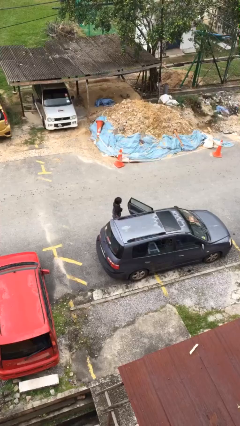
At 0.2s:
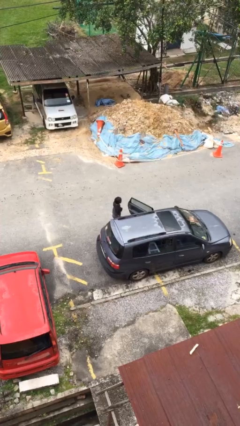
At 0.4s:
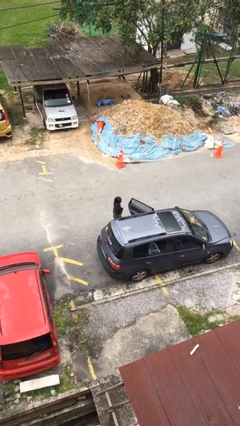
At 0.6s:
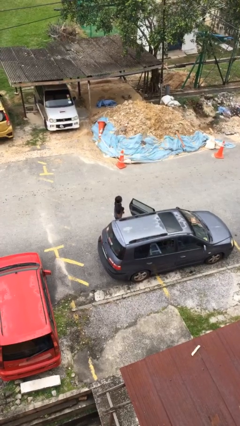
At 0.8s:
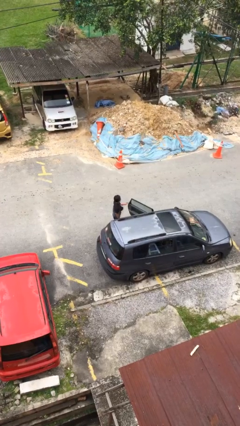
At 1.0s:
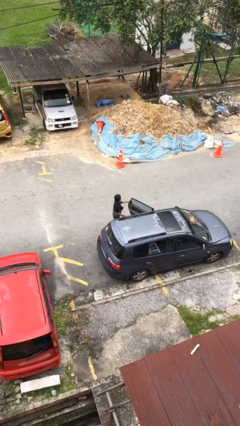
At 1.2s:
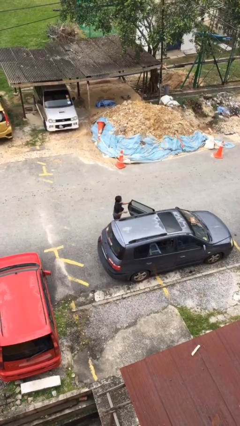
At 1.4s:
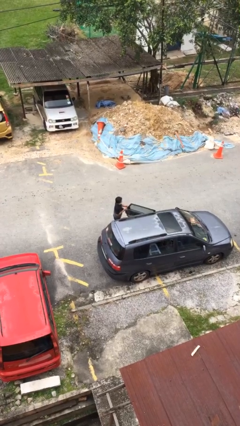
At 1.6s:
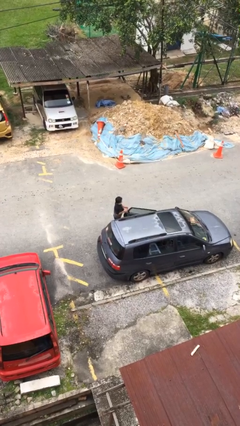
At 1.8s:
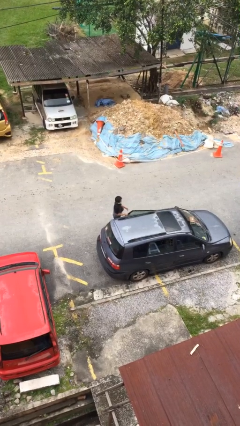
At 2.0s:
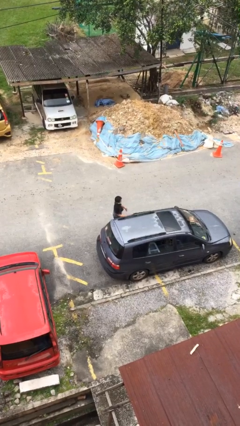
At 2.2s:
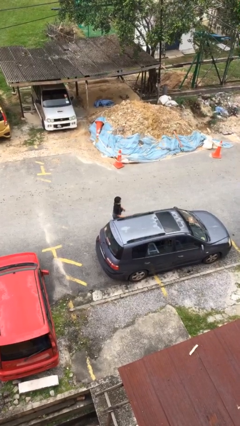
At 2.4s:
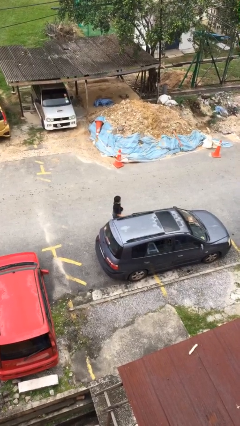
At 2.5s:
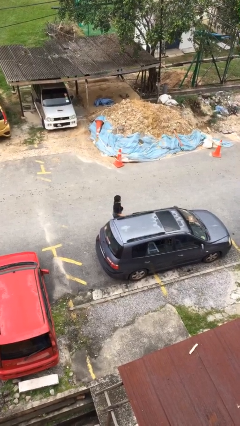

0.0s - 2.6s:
person closes car door

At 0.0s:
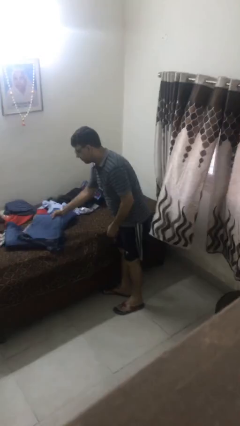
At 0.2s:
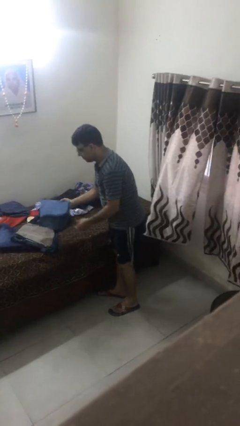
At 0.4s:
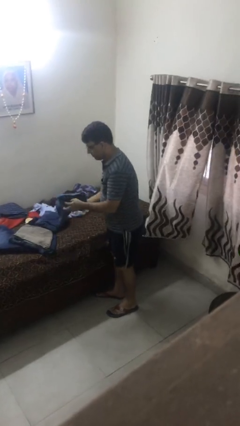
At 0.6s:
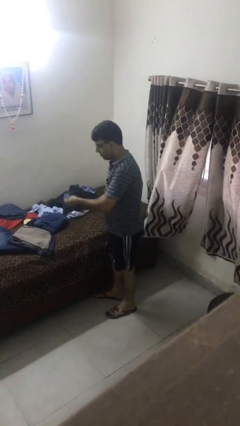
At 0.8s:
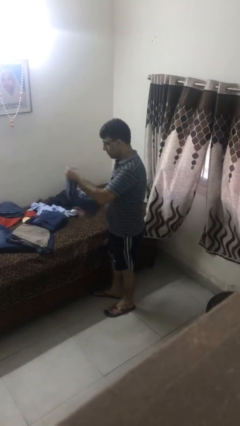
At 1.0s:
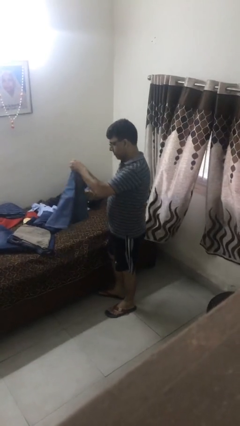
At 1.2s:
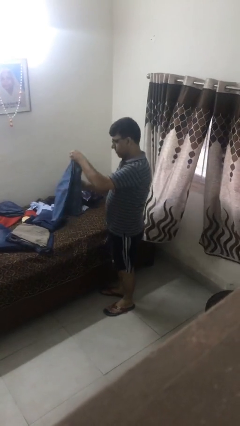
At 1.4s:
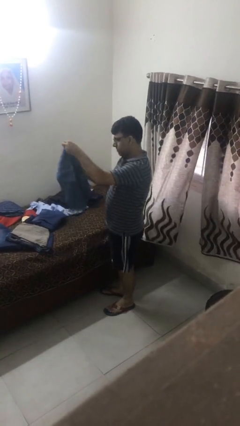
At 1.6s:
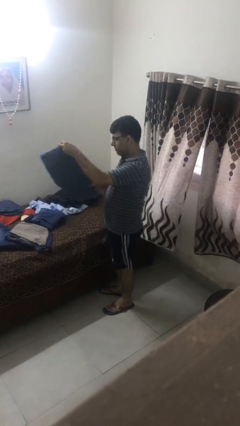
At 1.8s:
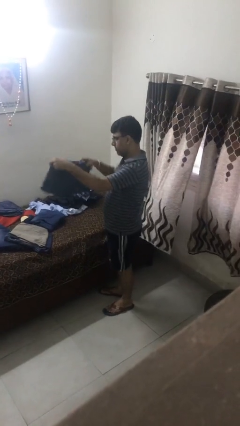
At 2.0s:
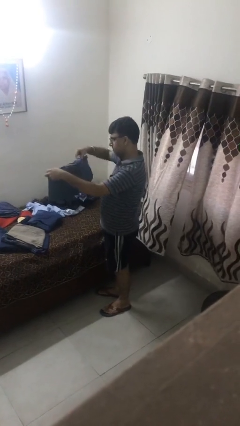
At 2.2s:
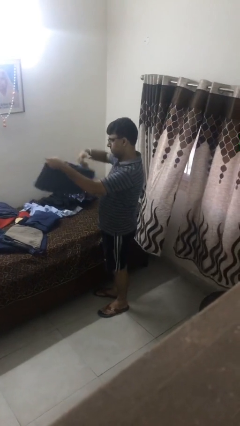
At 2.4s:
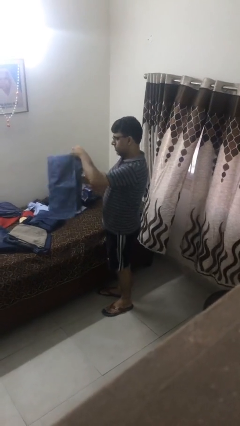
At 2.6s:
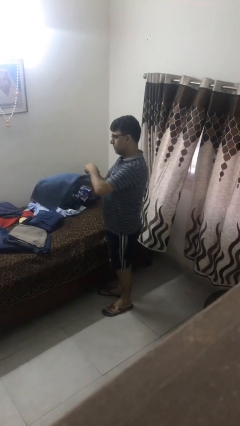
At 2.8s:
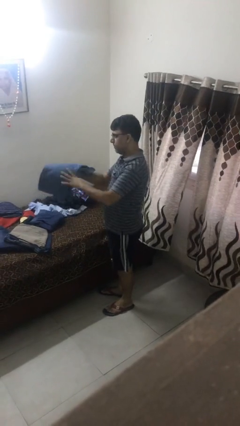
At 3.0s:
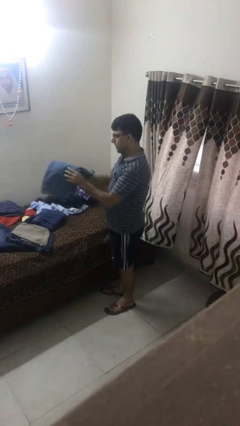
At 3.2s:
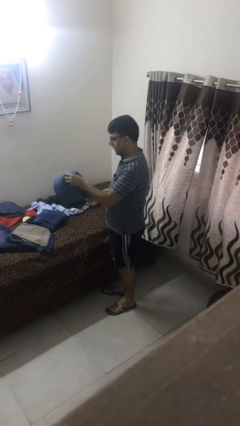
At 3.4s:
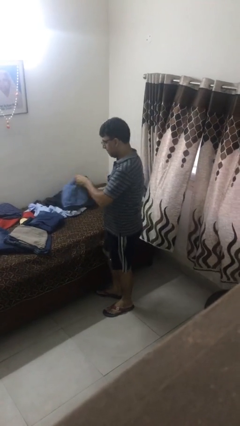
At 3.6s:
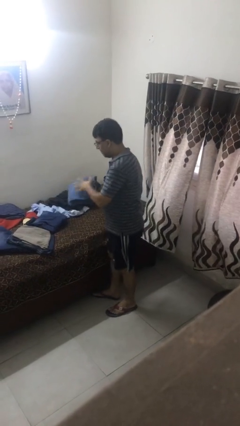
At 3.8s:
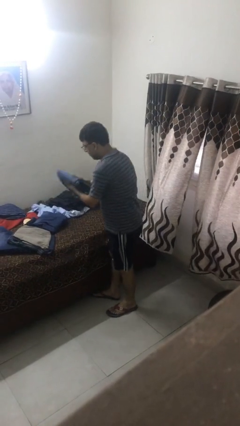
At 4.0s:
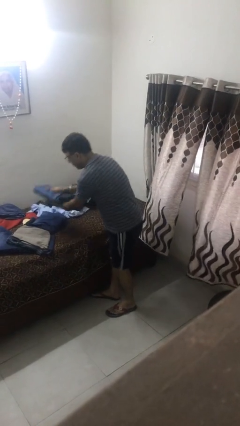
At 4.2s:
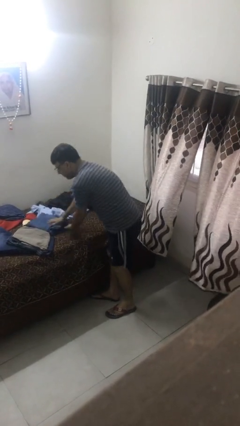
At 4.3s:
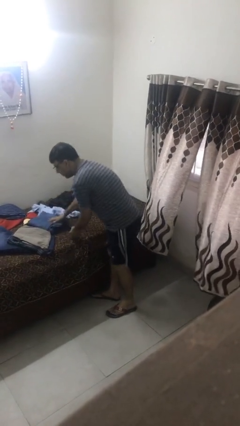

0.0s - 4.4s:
person folds pants

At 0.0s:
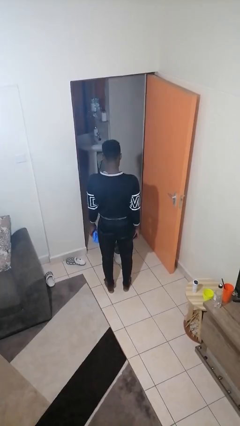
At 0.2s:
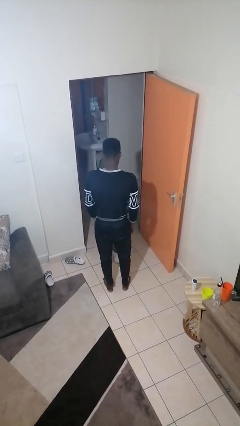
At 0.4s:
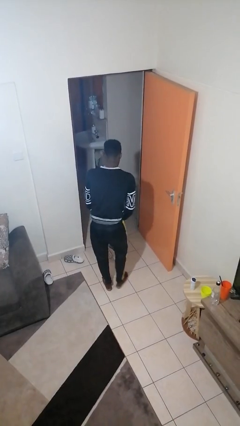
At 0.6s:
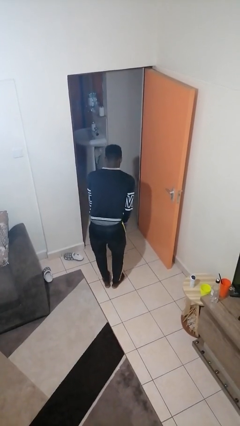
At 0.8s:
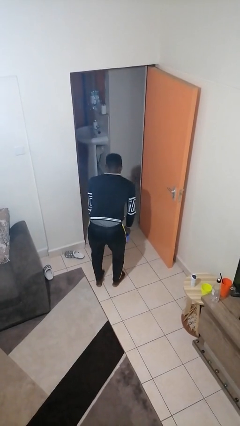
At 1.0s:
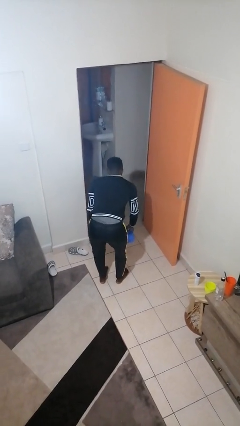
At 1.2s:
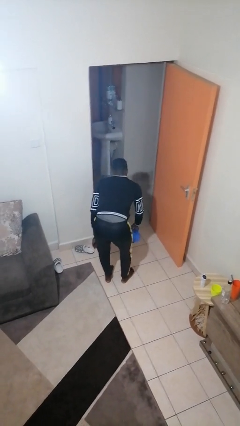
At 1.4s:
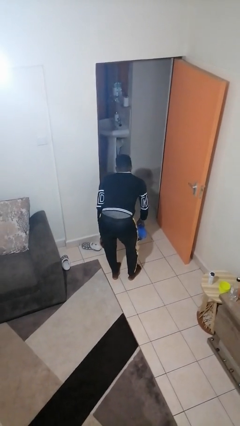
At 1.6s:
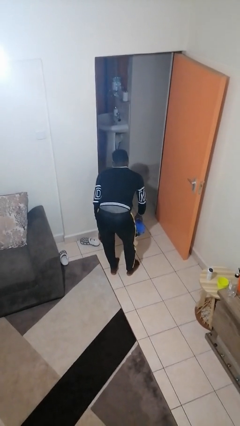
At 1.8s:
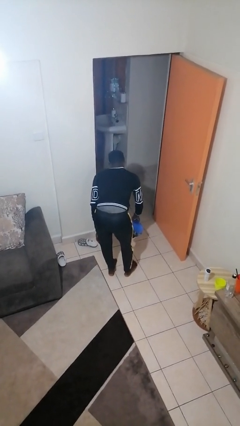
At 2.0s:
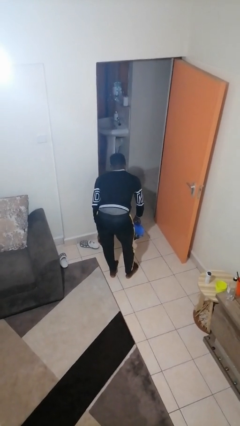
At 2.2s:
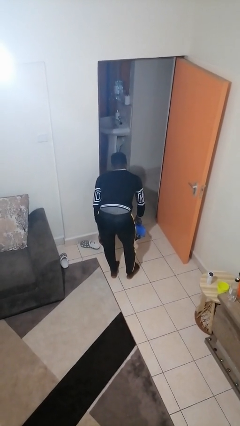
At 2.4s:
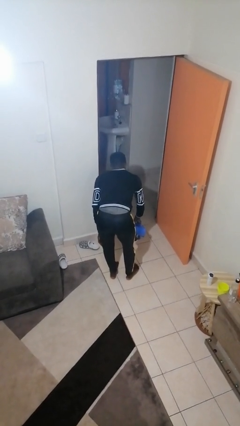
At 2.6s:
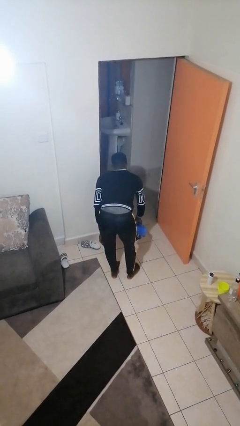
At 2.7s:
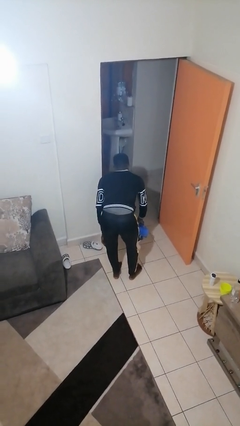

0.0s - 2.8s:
person waters houseplant

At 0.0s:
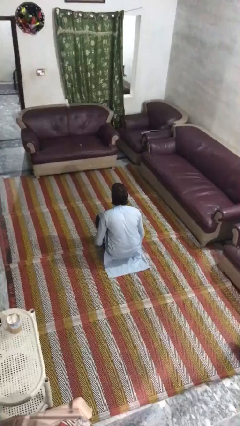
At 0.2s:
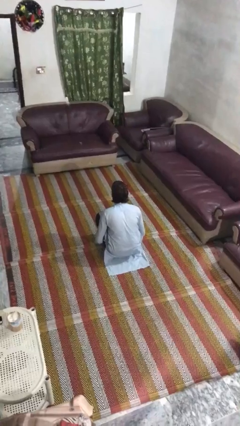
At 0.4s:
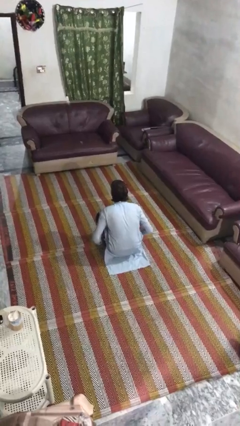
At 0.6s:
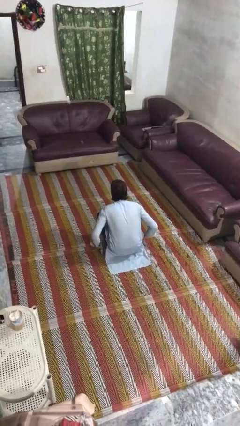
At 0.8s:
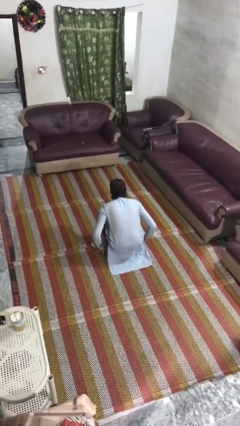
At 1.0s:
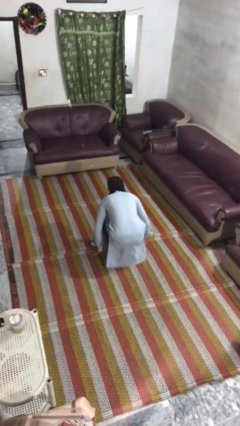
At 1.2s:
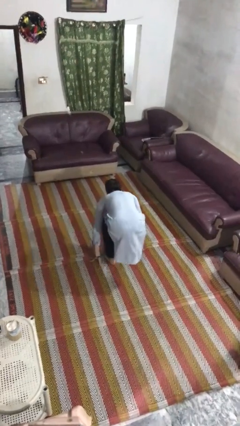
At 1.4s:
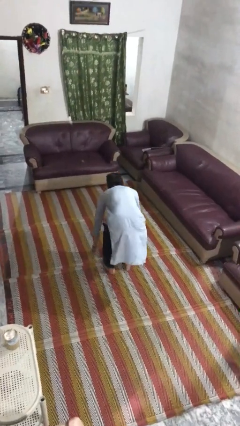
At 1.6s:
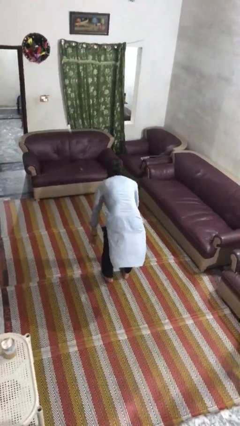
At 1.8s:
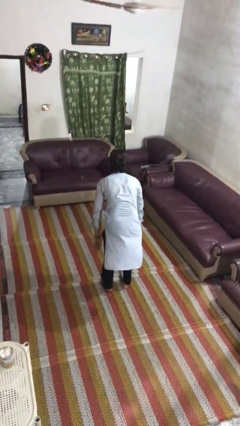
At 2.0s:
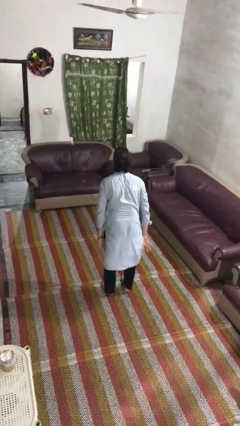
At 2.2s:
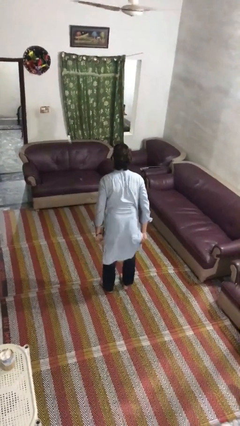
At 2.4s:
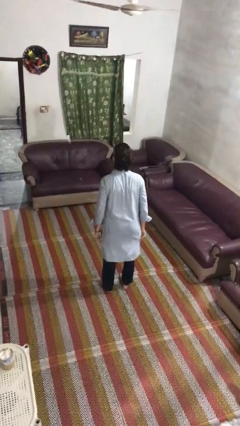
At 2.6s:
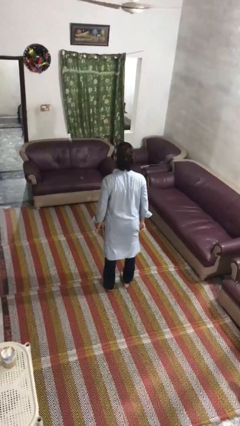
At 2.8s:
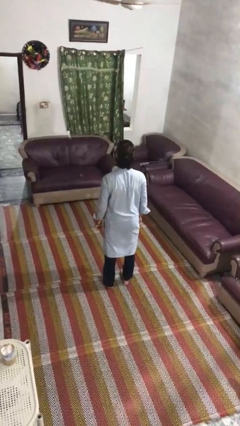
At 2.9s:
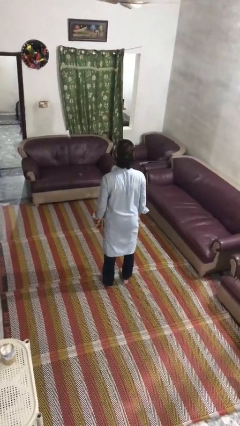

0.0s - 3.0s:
person stands up

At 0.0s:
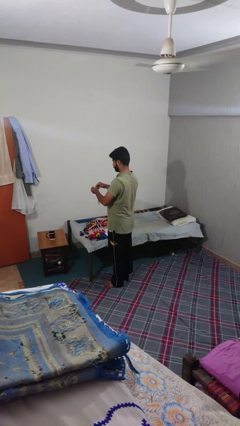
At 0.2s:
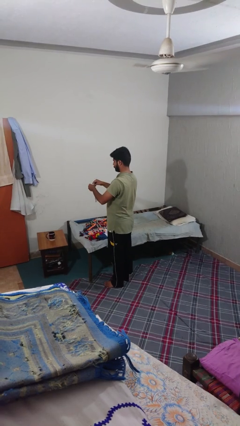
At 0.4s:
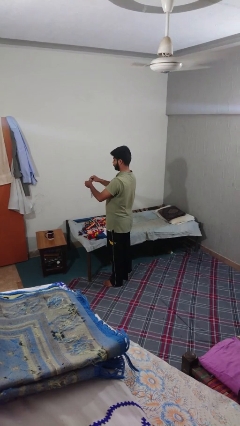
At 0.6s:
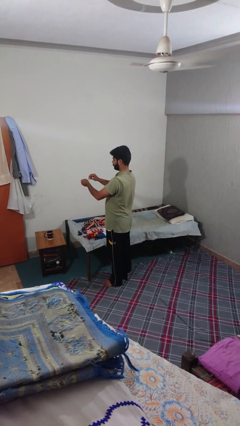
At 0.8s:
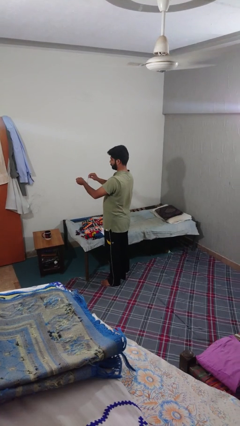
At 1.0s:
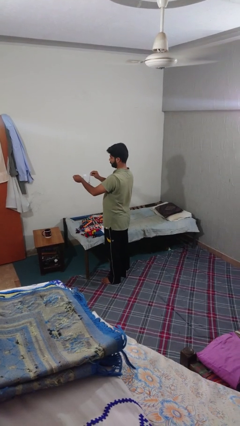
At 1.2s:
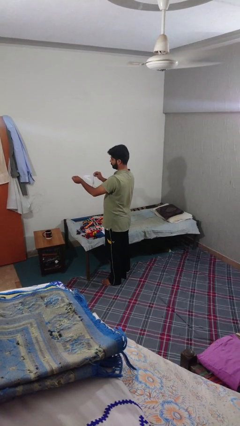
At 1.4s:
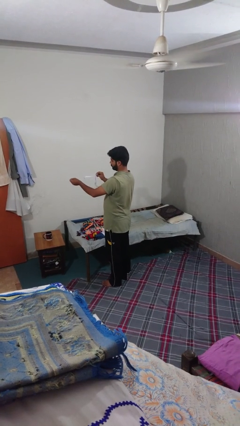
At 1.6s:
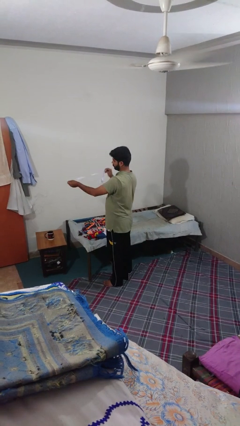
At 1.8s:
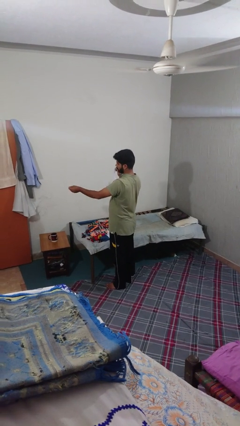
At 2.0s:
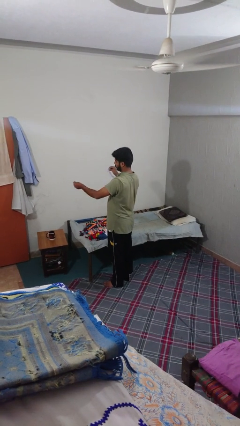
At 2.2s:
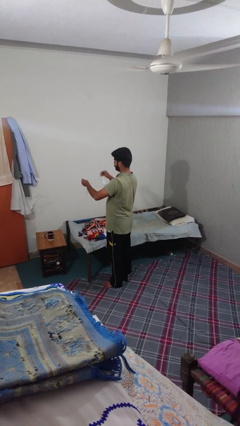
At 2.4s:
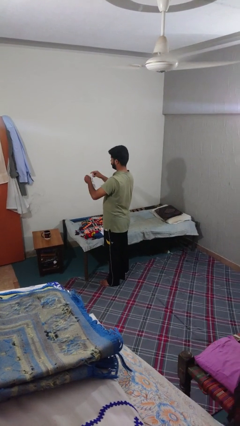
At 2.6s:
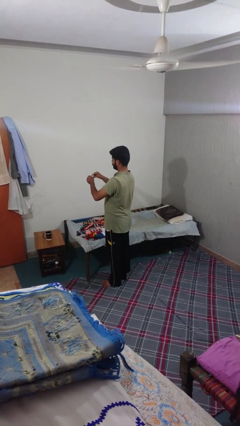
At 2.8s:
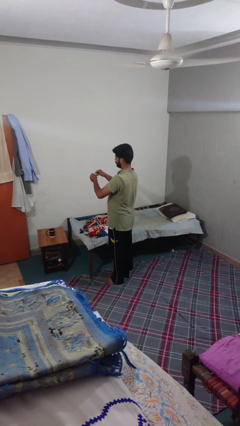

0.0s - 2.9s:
person tears paper

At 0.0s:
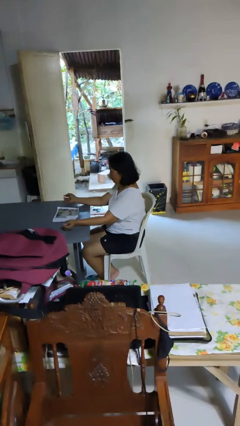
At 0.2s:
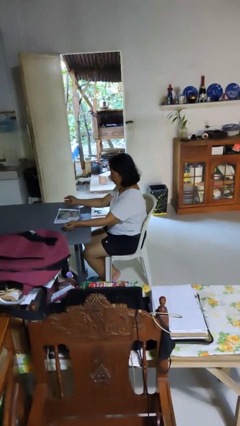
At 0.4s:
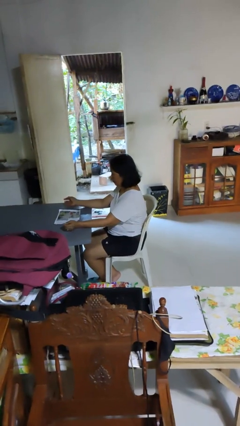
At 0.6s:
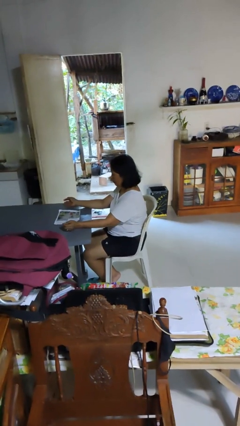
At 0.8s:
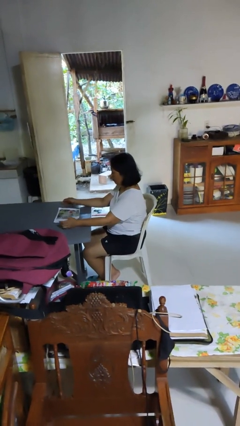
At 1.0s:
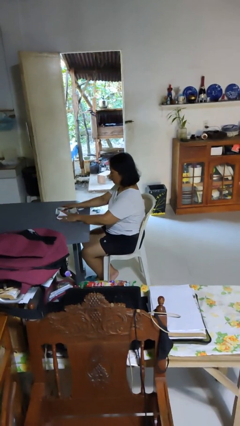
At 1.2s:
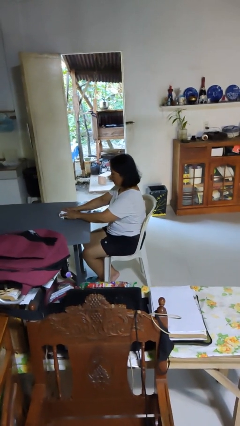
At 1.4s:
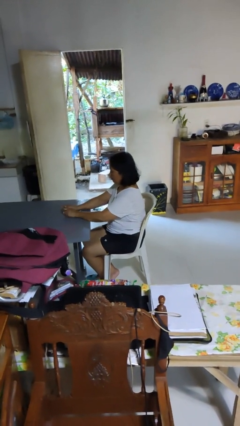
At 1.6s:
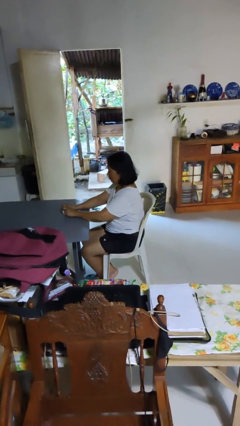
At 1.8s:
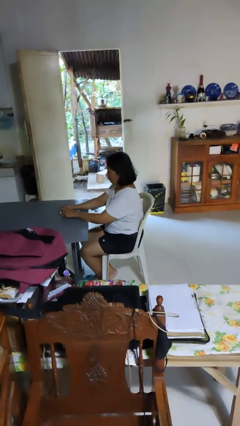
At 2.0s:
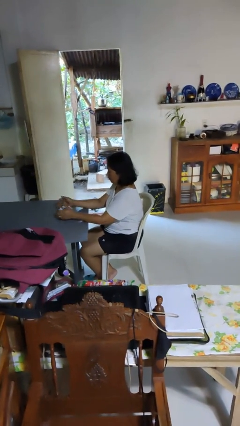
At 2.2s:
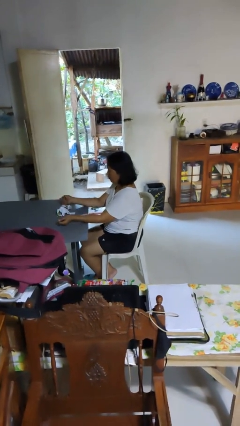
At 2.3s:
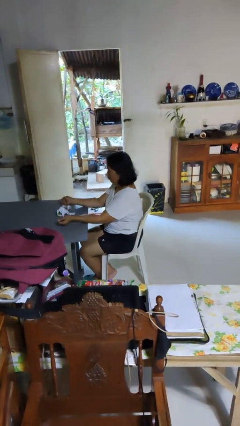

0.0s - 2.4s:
person crumples paper

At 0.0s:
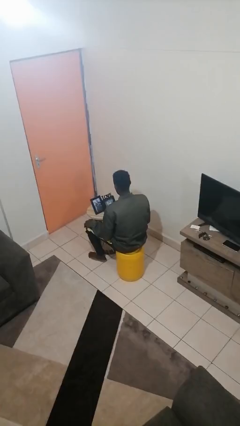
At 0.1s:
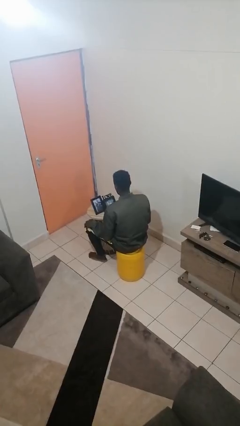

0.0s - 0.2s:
person waves hand over object
